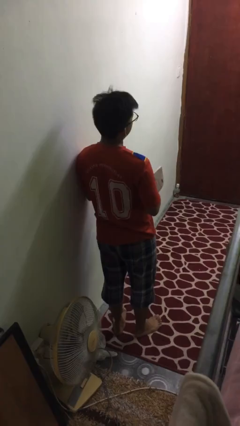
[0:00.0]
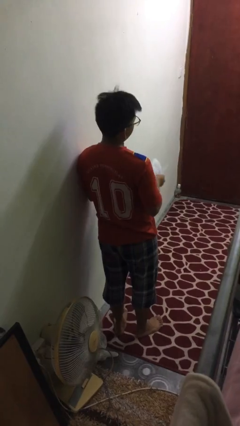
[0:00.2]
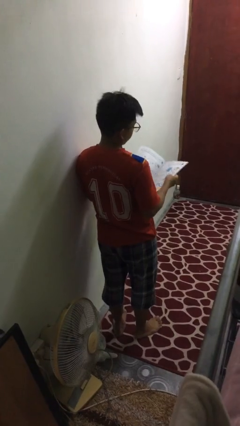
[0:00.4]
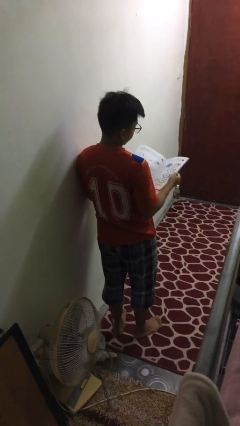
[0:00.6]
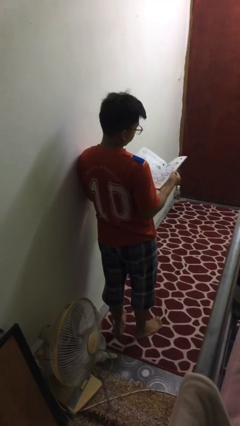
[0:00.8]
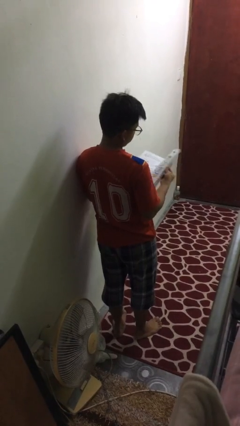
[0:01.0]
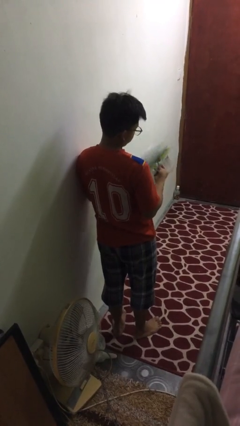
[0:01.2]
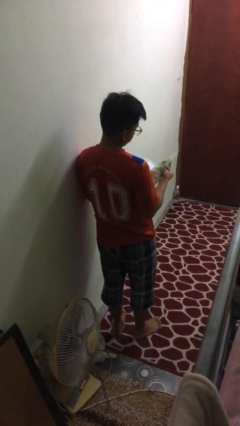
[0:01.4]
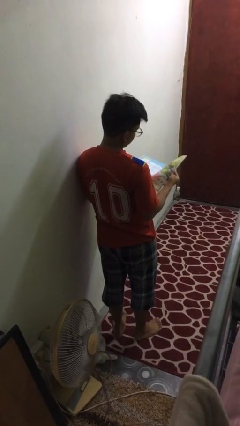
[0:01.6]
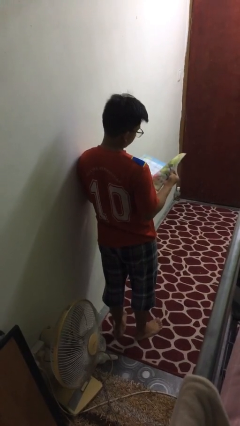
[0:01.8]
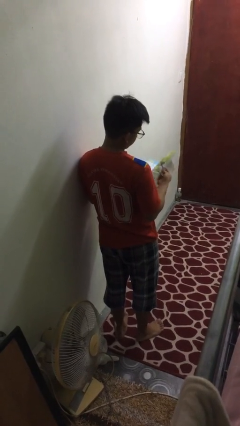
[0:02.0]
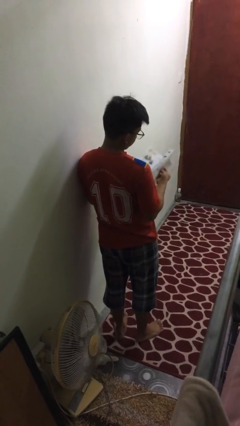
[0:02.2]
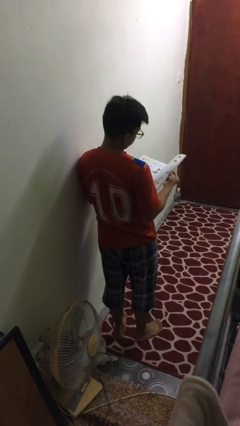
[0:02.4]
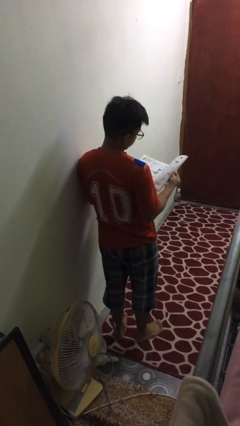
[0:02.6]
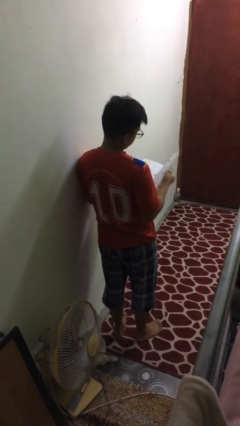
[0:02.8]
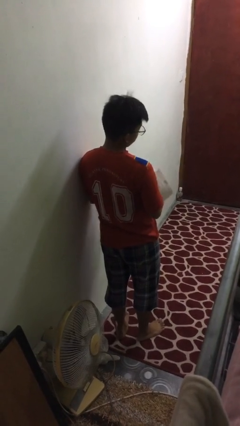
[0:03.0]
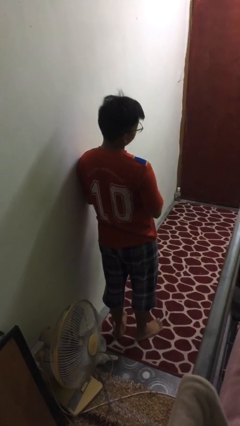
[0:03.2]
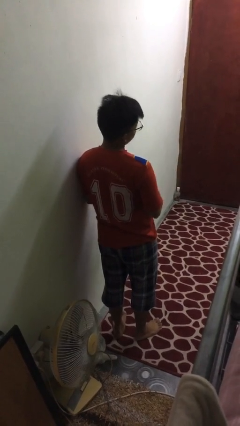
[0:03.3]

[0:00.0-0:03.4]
person reads magazine

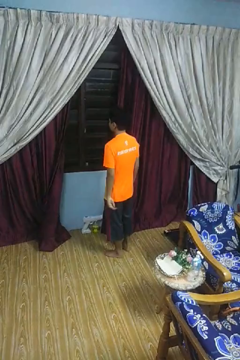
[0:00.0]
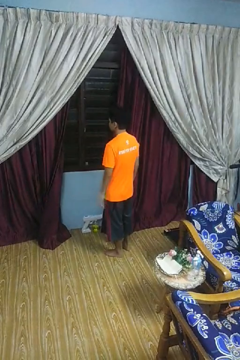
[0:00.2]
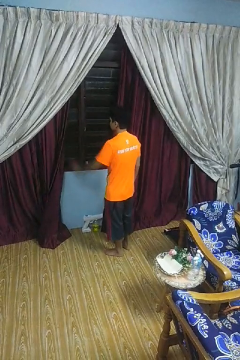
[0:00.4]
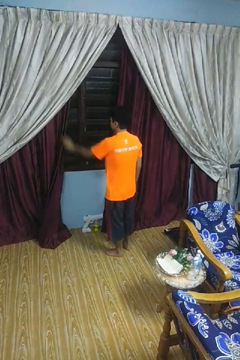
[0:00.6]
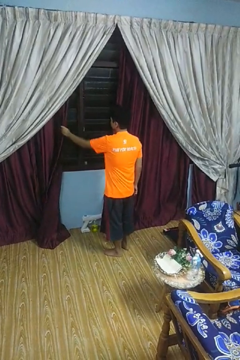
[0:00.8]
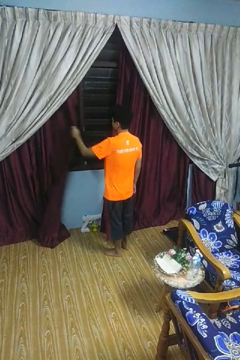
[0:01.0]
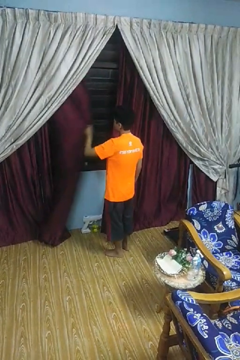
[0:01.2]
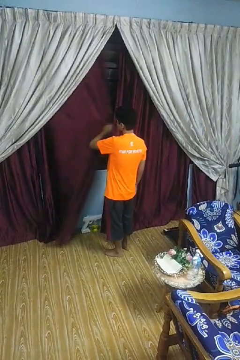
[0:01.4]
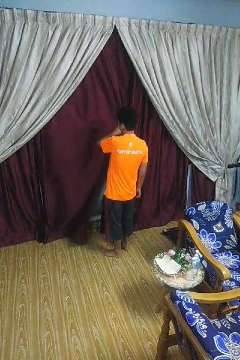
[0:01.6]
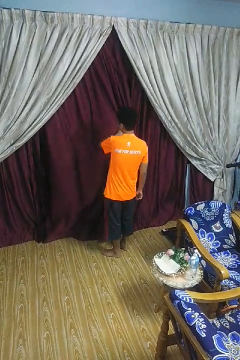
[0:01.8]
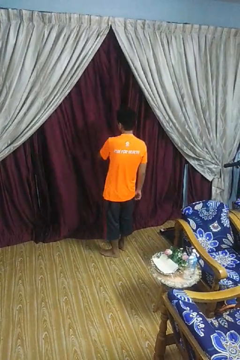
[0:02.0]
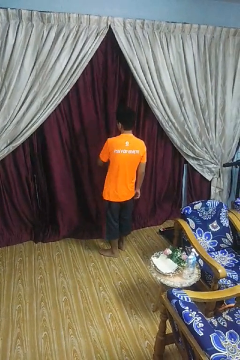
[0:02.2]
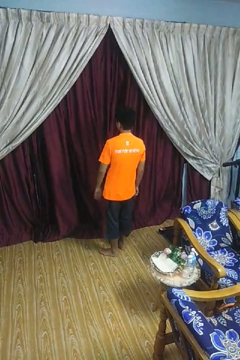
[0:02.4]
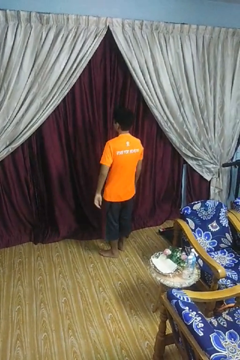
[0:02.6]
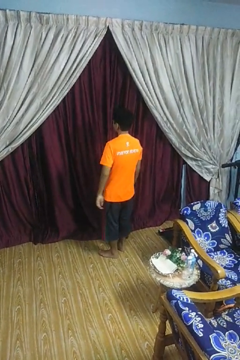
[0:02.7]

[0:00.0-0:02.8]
person closes curtains

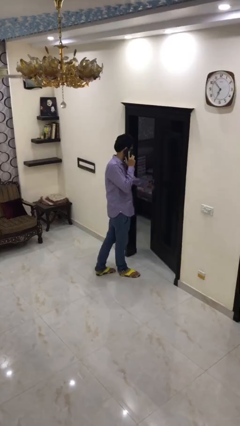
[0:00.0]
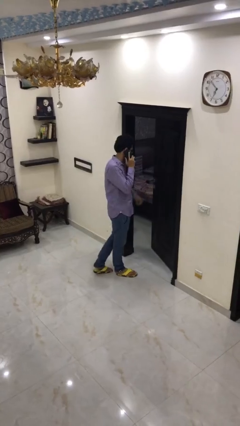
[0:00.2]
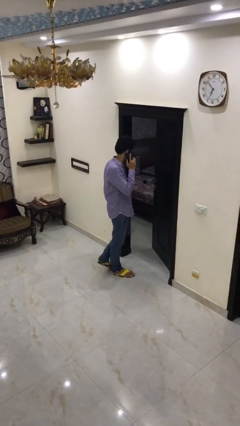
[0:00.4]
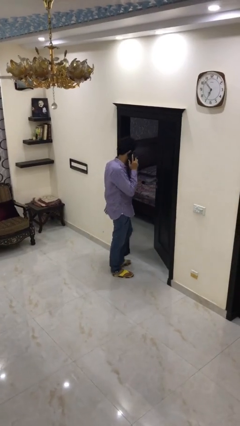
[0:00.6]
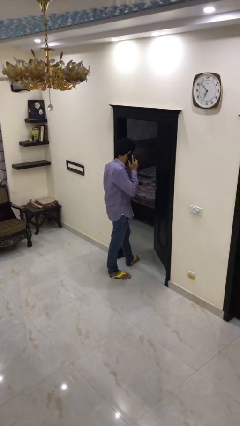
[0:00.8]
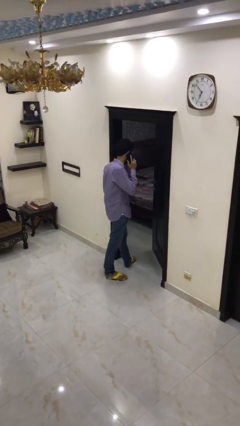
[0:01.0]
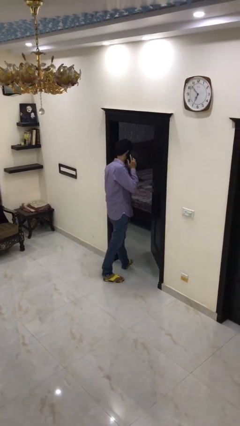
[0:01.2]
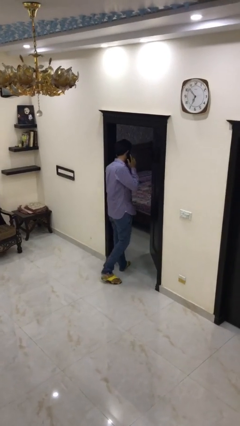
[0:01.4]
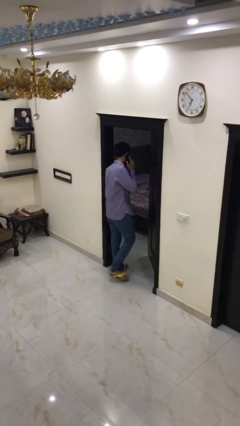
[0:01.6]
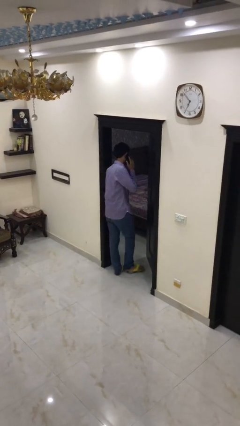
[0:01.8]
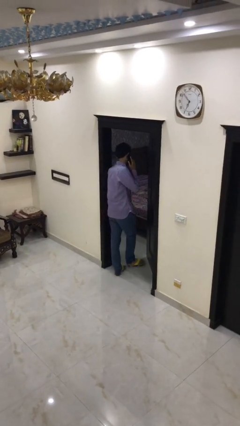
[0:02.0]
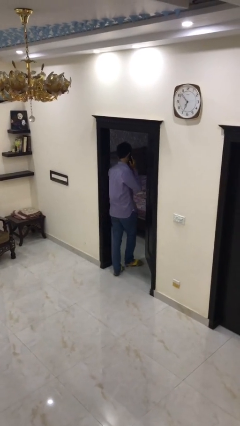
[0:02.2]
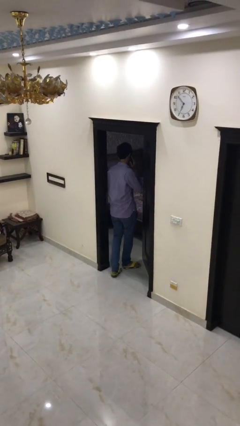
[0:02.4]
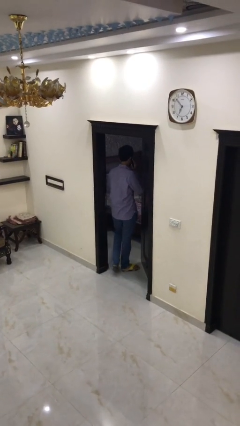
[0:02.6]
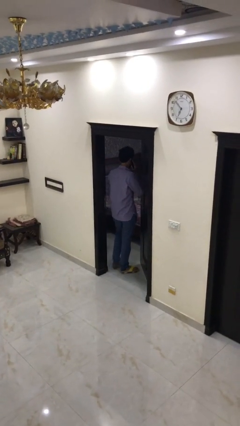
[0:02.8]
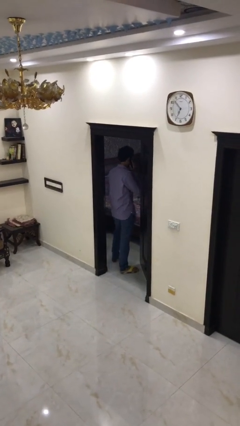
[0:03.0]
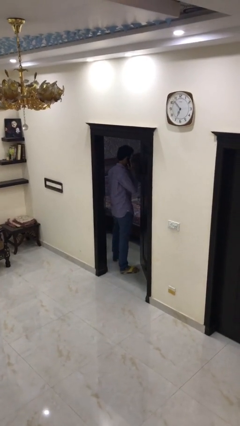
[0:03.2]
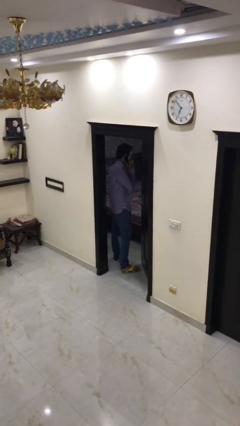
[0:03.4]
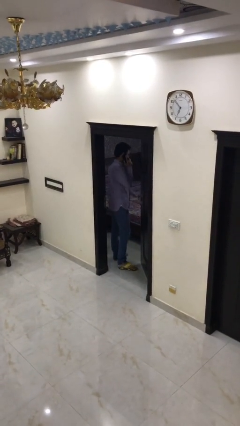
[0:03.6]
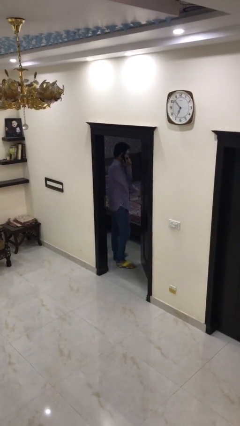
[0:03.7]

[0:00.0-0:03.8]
person exits scene through structure

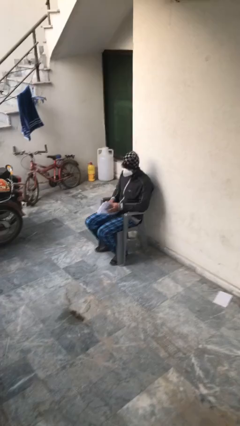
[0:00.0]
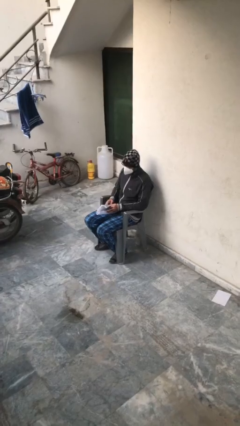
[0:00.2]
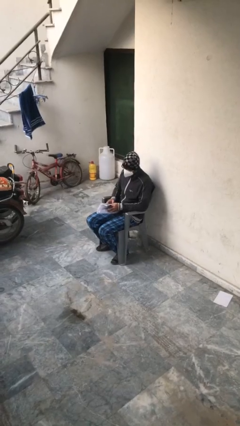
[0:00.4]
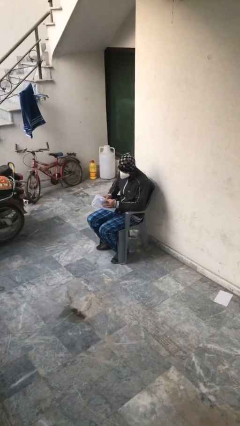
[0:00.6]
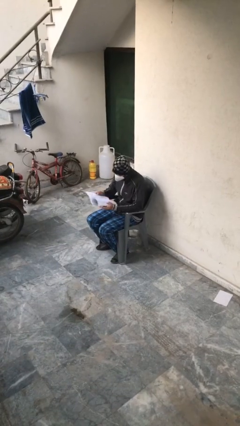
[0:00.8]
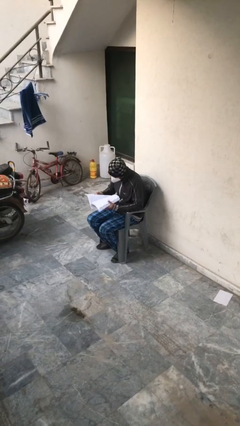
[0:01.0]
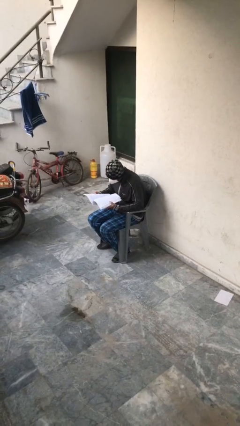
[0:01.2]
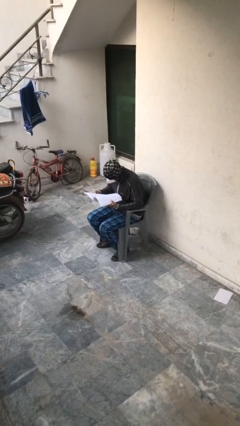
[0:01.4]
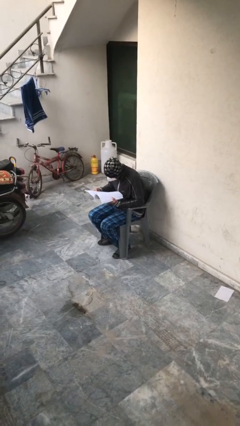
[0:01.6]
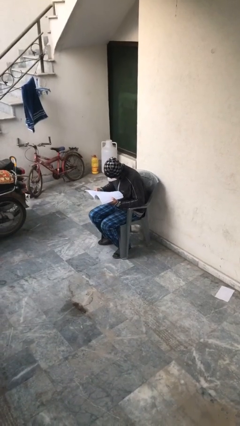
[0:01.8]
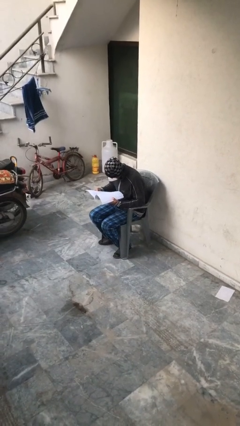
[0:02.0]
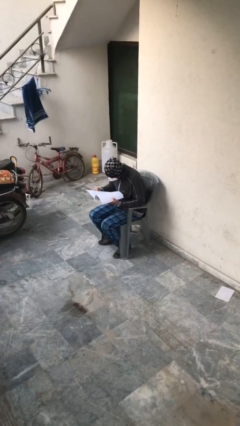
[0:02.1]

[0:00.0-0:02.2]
person reads document

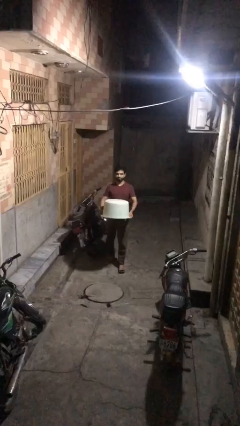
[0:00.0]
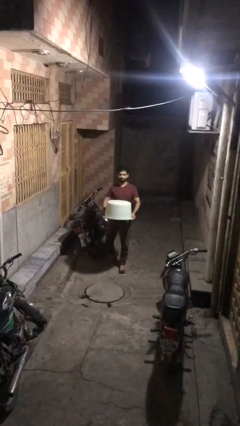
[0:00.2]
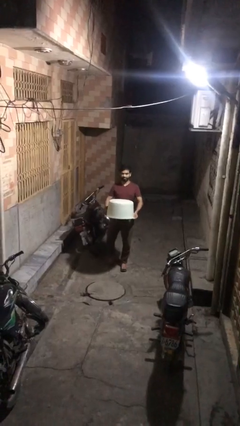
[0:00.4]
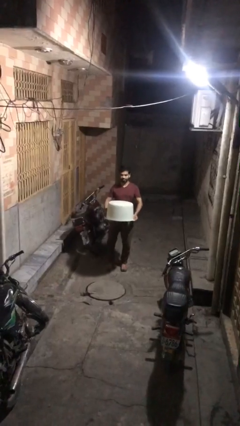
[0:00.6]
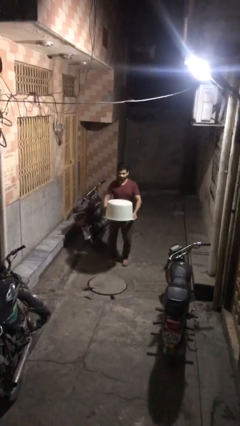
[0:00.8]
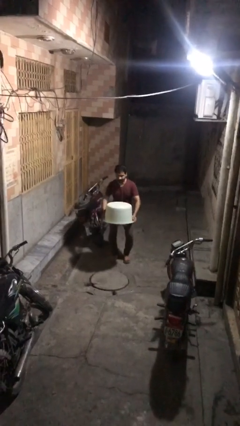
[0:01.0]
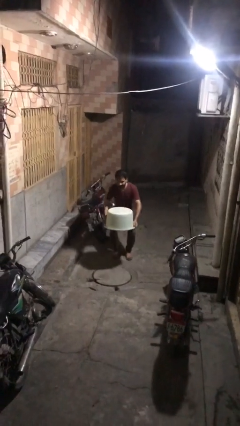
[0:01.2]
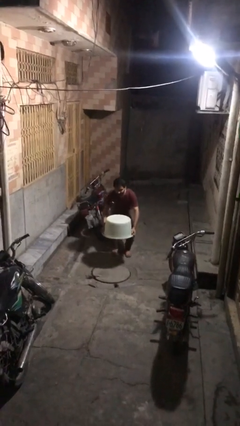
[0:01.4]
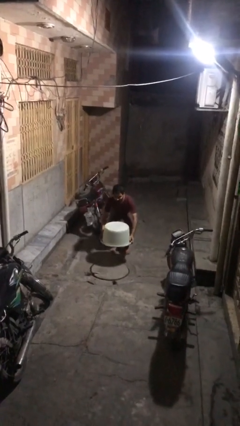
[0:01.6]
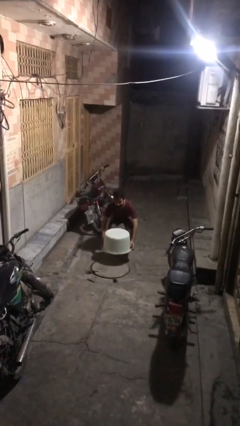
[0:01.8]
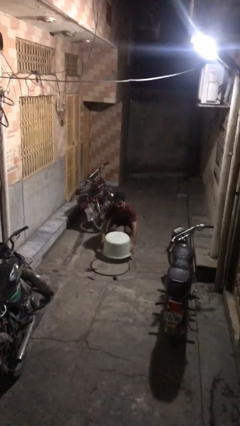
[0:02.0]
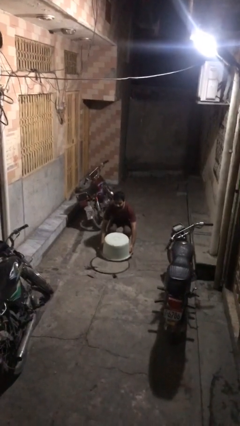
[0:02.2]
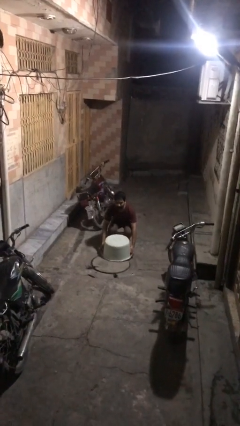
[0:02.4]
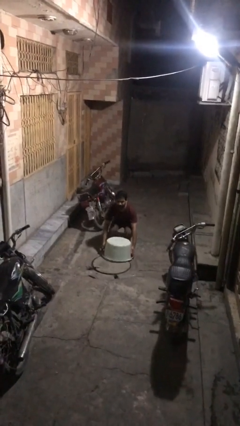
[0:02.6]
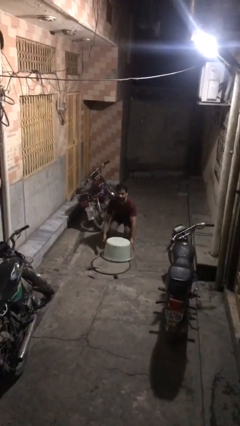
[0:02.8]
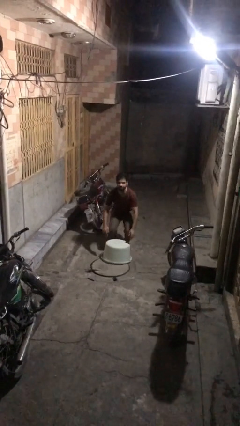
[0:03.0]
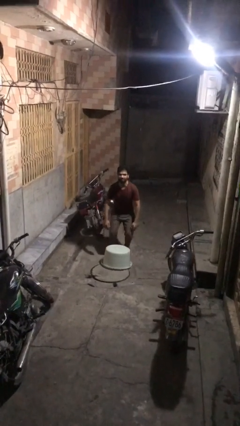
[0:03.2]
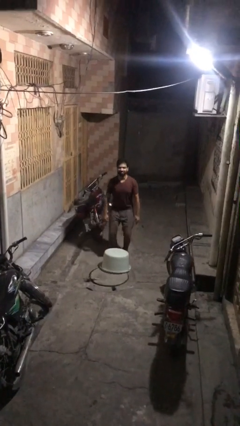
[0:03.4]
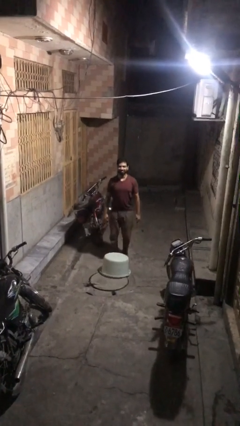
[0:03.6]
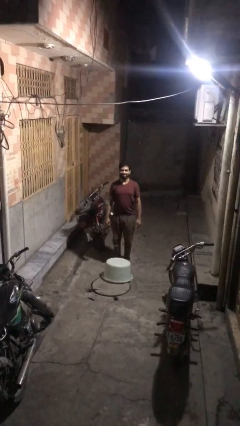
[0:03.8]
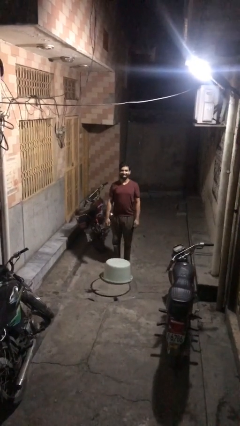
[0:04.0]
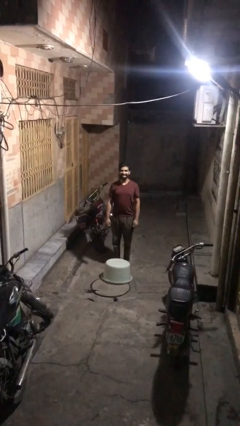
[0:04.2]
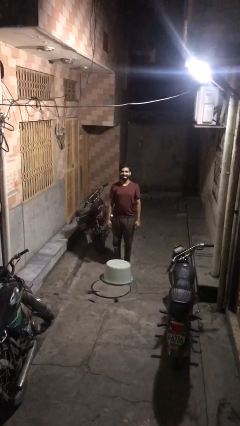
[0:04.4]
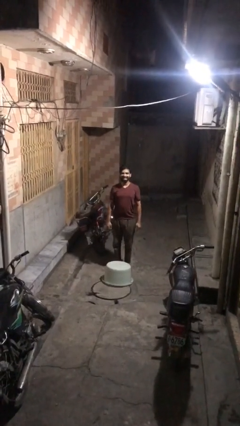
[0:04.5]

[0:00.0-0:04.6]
person puts down object on floor

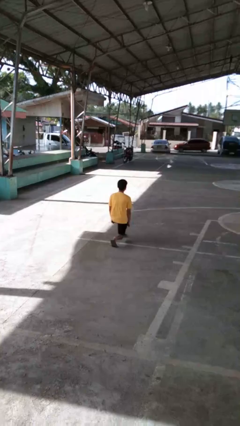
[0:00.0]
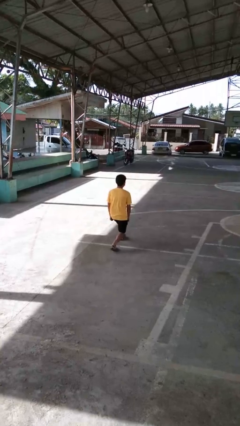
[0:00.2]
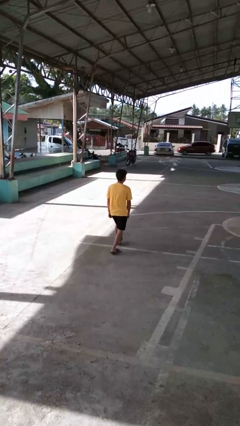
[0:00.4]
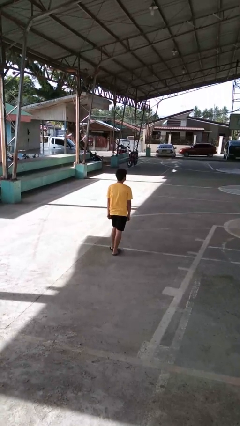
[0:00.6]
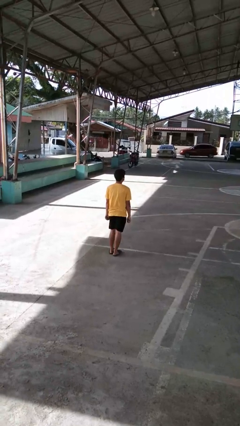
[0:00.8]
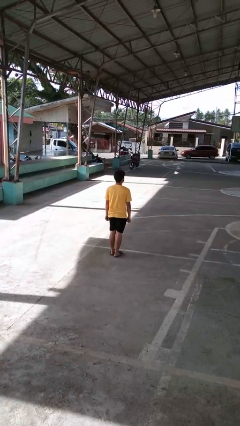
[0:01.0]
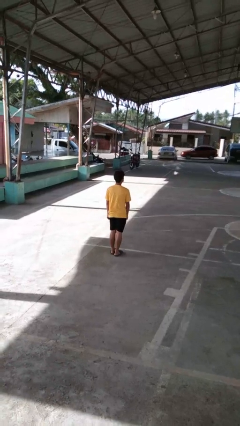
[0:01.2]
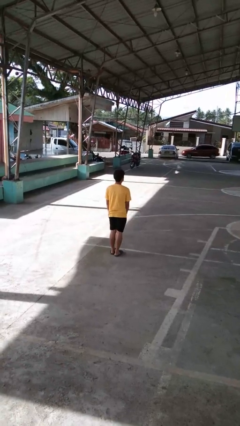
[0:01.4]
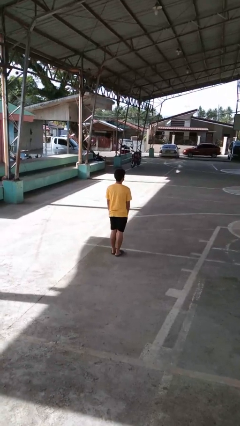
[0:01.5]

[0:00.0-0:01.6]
person stands up from floor
